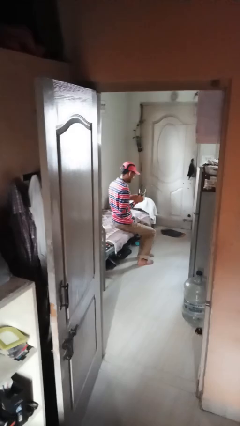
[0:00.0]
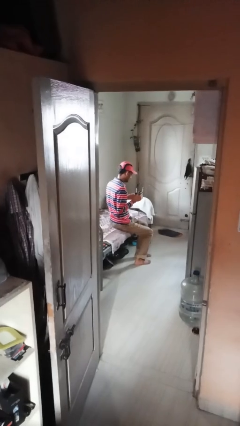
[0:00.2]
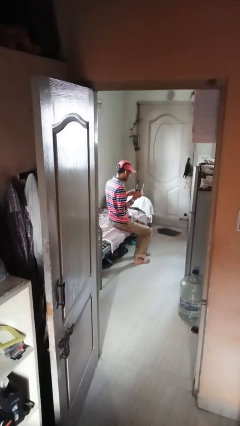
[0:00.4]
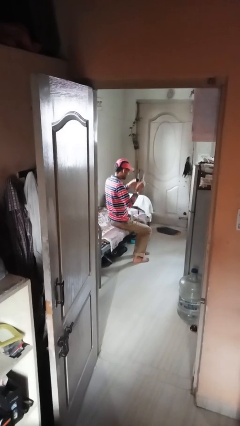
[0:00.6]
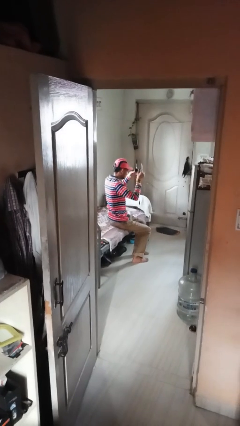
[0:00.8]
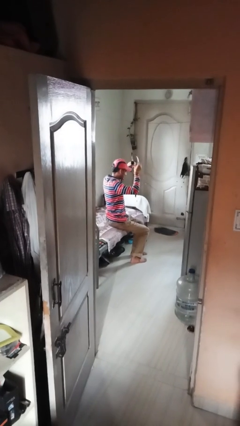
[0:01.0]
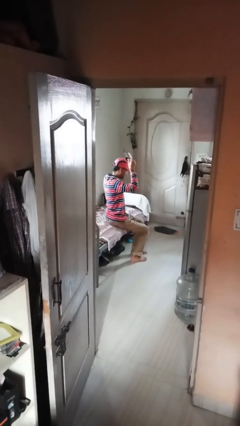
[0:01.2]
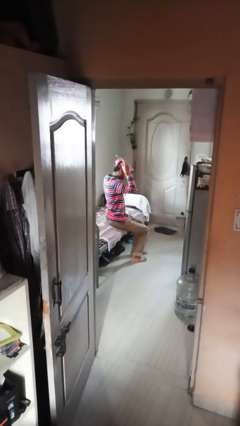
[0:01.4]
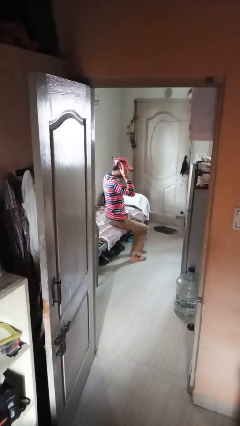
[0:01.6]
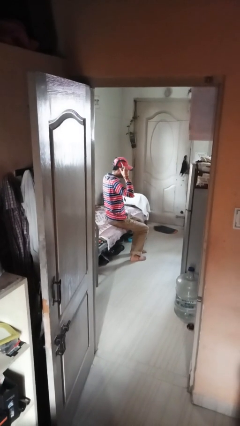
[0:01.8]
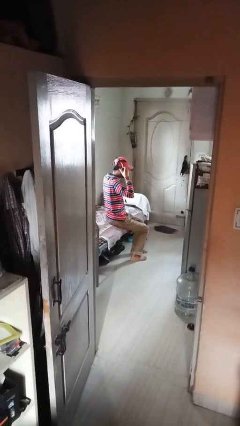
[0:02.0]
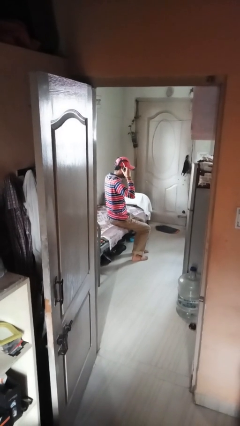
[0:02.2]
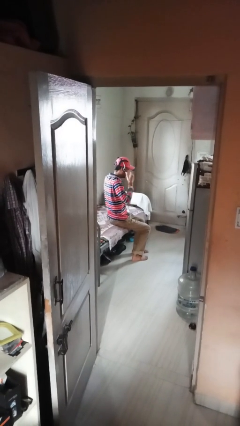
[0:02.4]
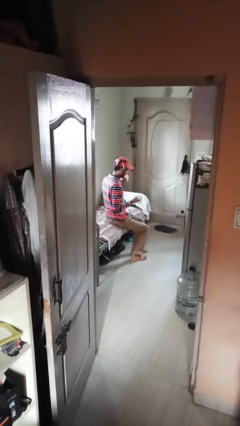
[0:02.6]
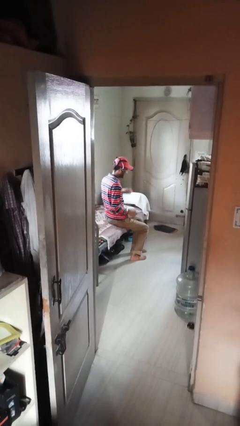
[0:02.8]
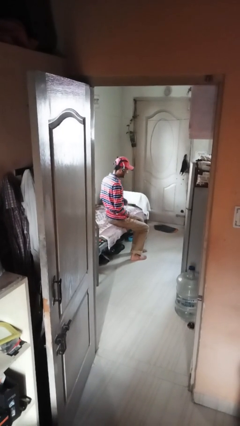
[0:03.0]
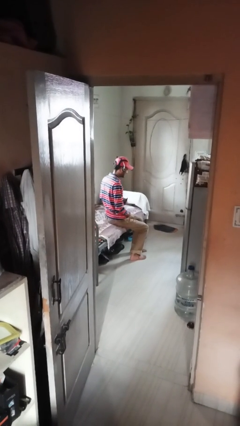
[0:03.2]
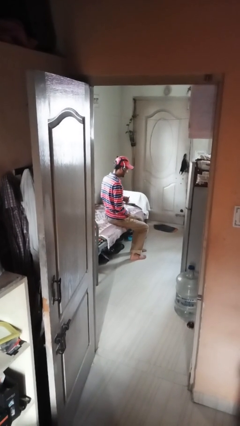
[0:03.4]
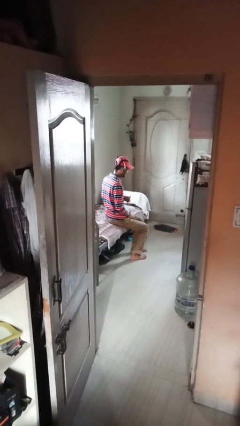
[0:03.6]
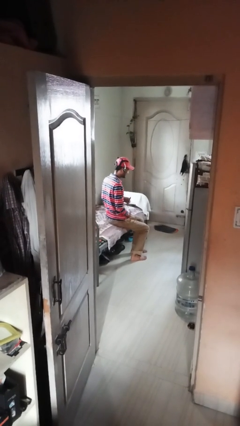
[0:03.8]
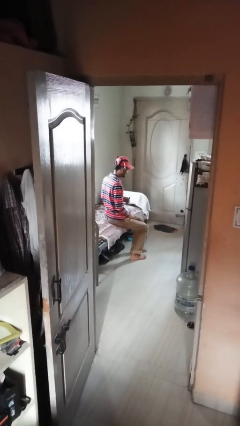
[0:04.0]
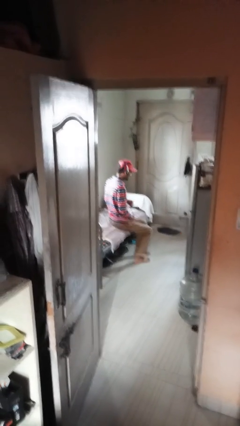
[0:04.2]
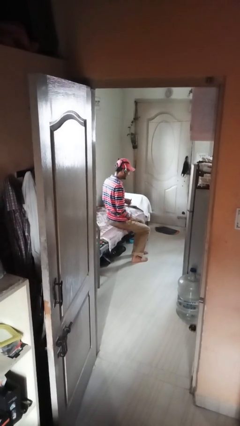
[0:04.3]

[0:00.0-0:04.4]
person puts on headphones

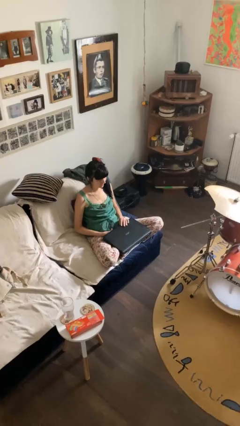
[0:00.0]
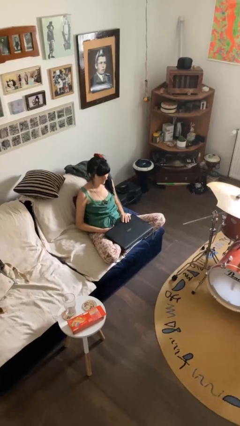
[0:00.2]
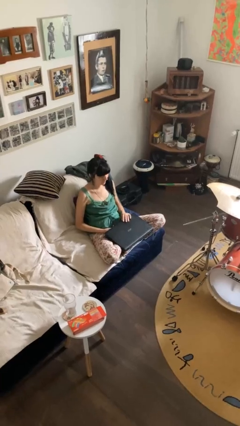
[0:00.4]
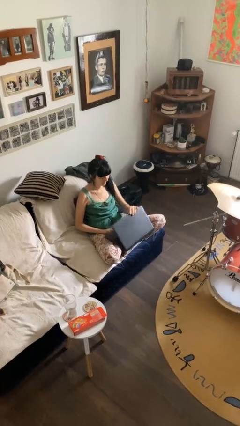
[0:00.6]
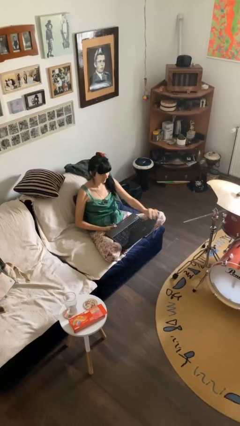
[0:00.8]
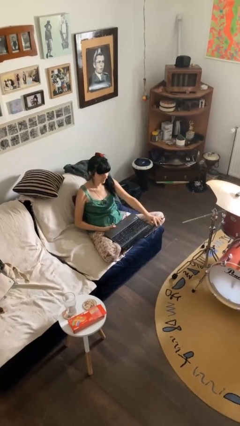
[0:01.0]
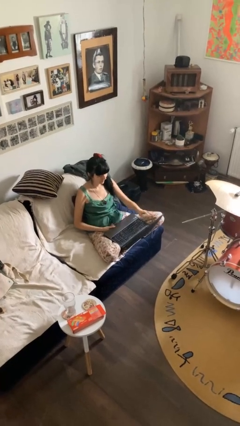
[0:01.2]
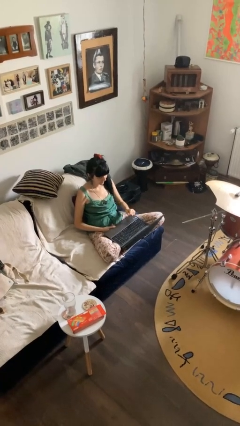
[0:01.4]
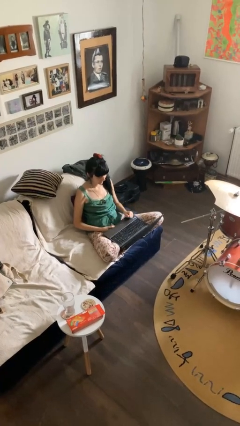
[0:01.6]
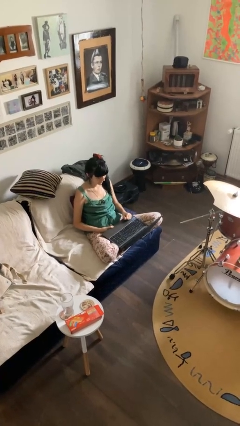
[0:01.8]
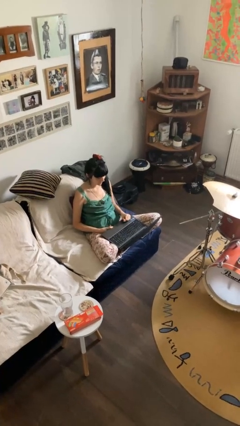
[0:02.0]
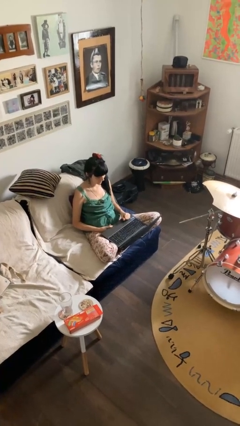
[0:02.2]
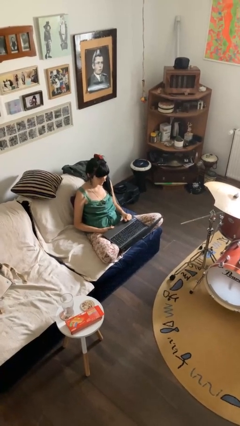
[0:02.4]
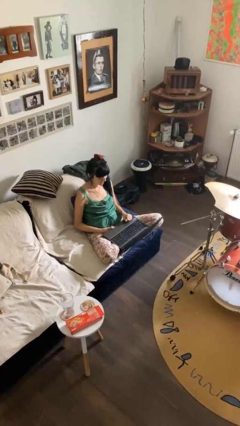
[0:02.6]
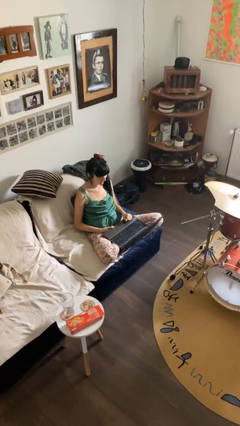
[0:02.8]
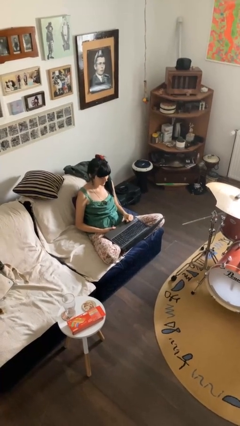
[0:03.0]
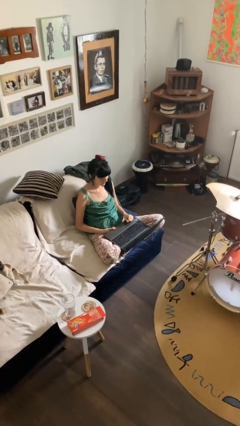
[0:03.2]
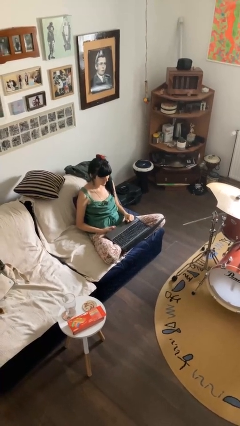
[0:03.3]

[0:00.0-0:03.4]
person opens laptop

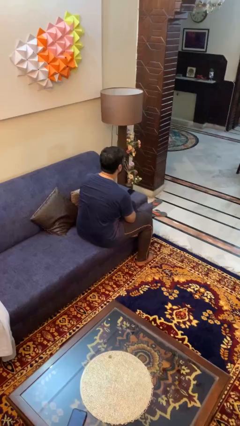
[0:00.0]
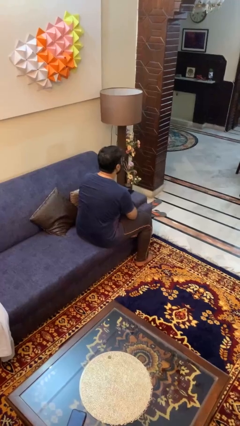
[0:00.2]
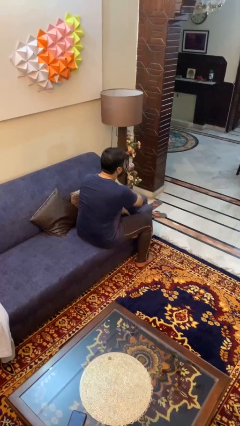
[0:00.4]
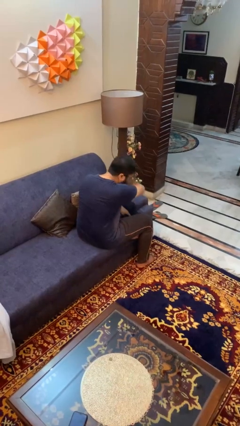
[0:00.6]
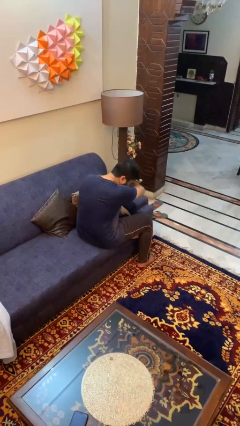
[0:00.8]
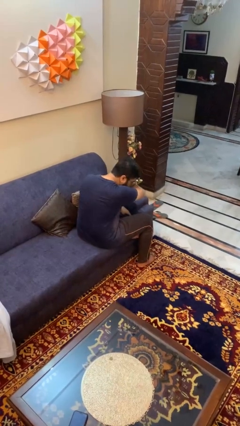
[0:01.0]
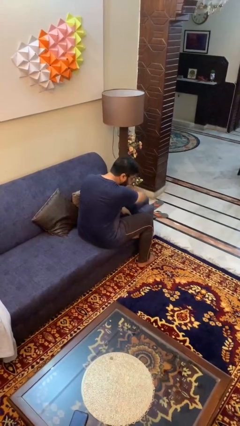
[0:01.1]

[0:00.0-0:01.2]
person sneezes into arm

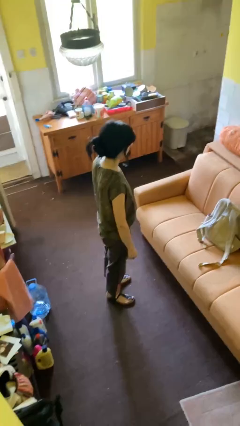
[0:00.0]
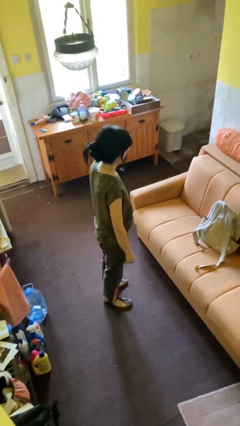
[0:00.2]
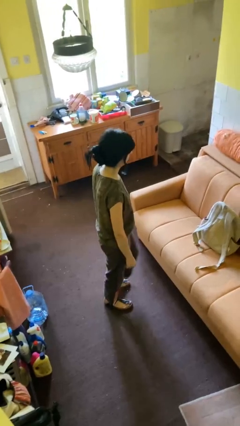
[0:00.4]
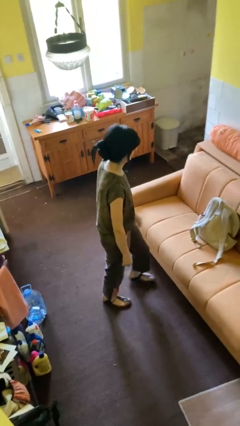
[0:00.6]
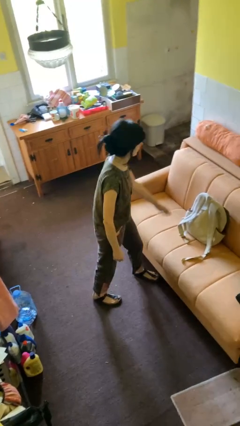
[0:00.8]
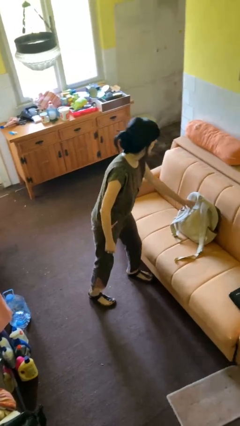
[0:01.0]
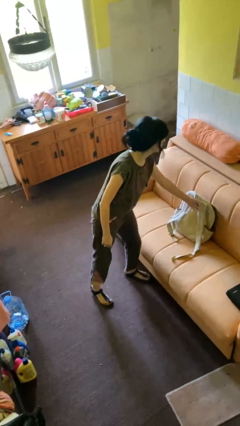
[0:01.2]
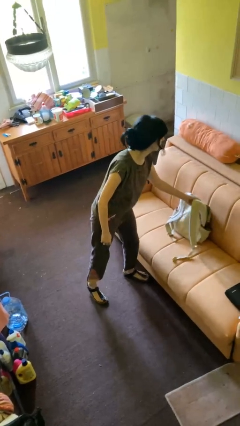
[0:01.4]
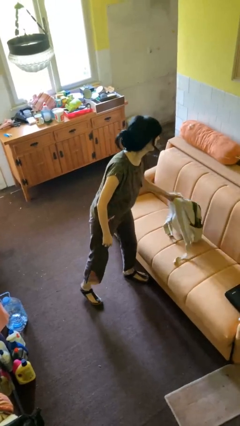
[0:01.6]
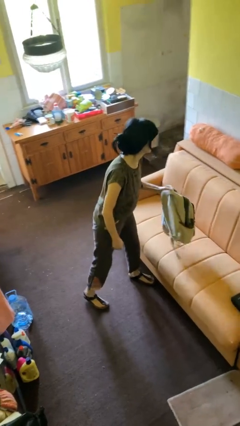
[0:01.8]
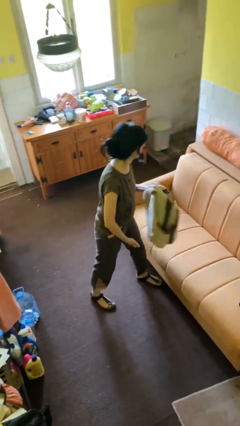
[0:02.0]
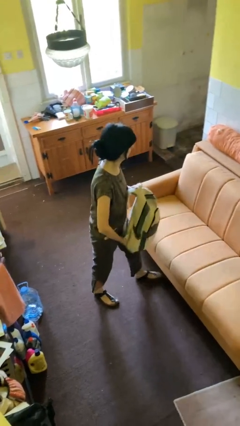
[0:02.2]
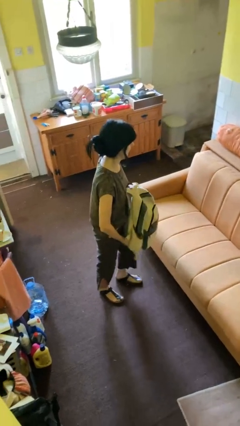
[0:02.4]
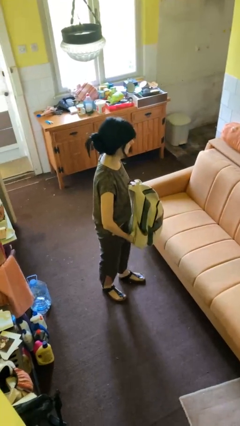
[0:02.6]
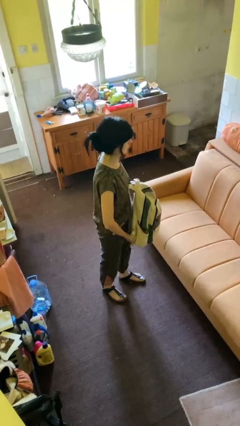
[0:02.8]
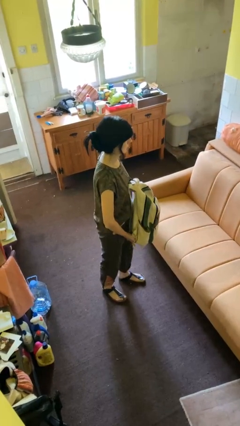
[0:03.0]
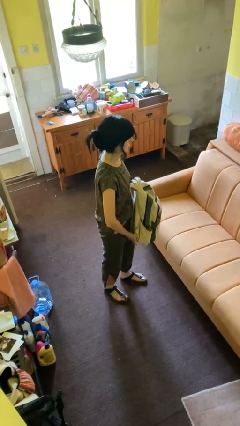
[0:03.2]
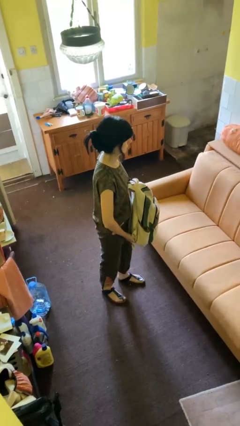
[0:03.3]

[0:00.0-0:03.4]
person picks up object from couch

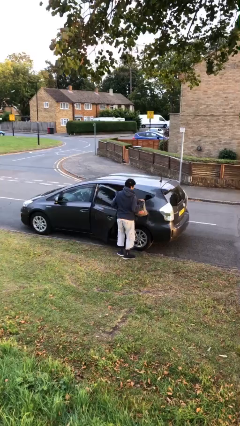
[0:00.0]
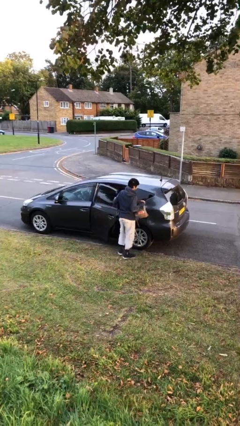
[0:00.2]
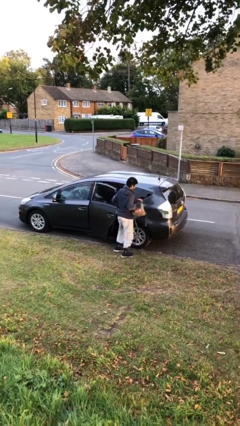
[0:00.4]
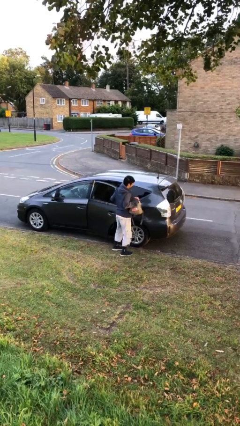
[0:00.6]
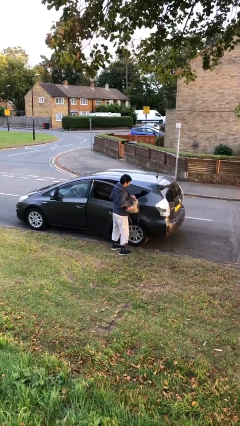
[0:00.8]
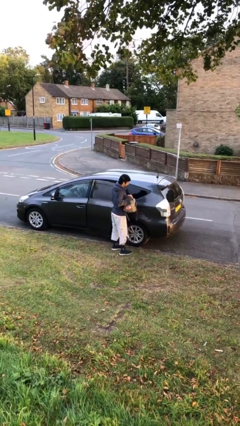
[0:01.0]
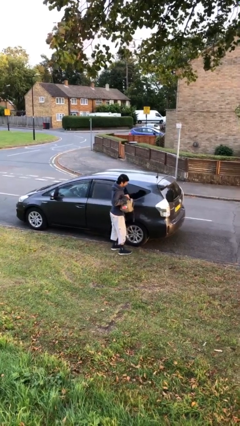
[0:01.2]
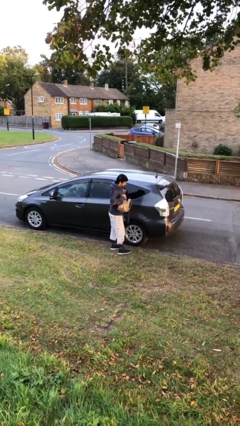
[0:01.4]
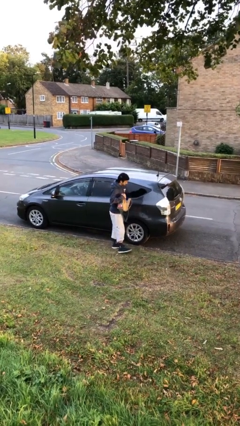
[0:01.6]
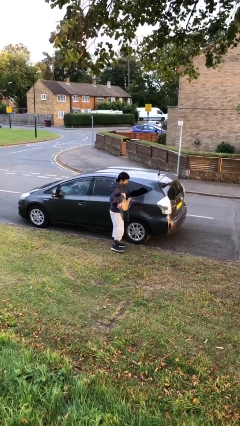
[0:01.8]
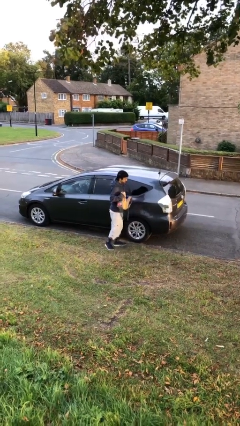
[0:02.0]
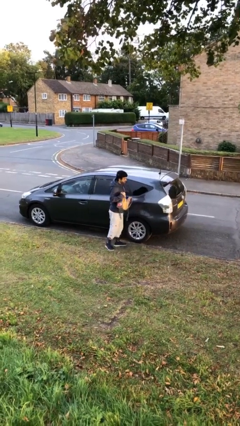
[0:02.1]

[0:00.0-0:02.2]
person closes car door

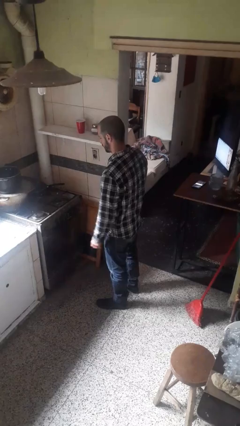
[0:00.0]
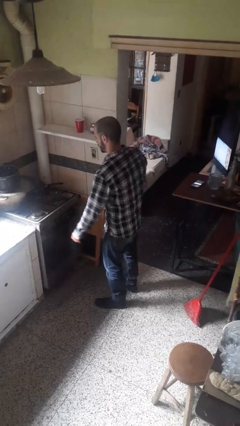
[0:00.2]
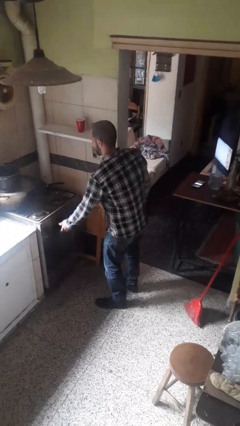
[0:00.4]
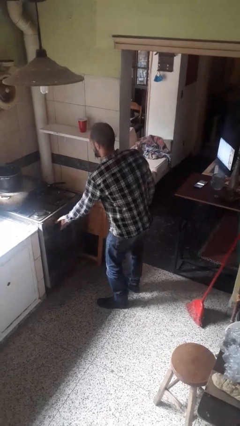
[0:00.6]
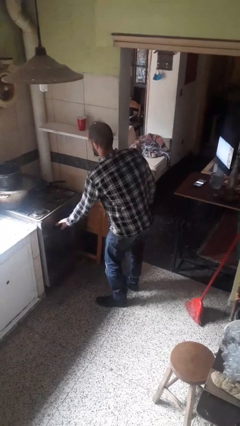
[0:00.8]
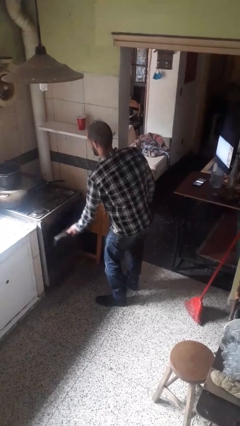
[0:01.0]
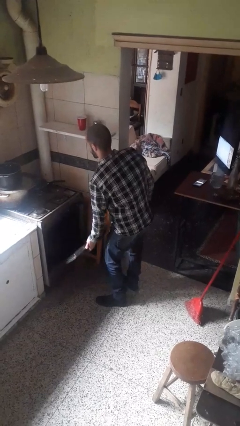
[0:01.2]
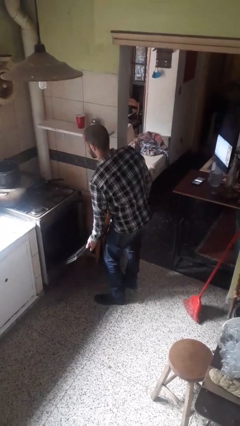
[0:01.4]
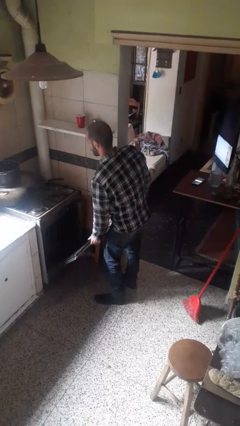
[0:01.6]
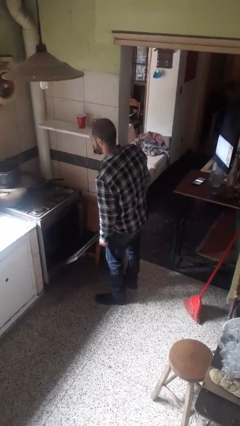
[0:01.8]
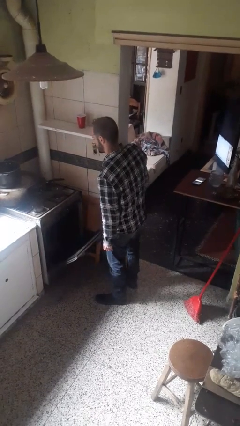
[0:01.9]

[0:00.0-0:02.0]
person opens oven door

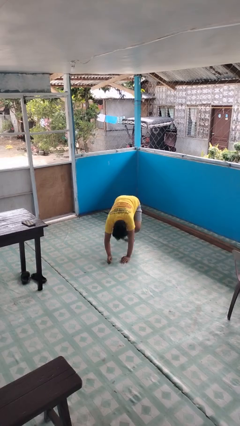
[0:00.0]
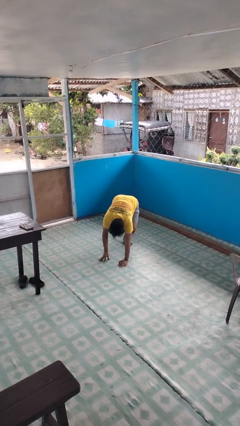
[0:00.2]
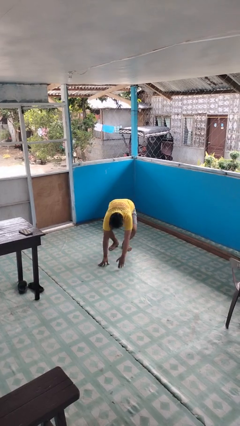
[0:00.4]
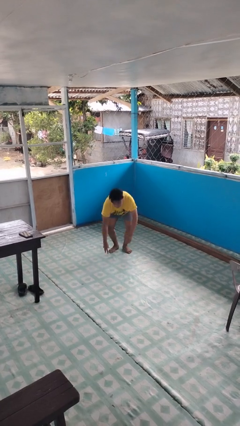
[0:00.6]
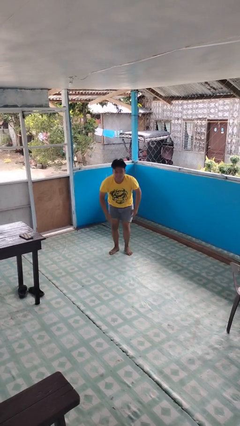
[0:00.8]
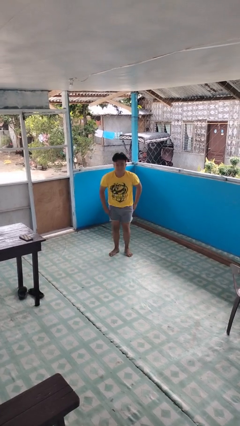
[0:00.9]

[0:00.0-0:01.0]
person stands up from floor
